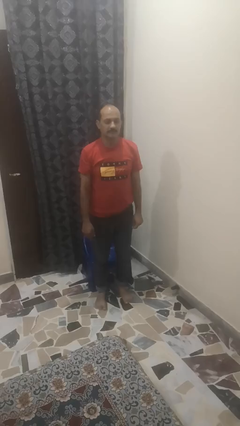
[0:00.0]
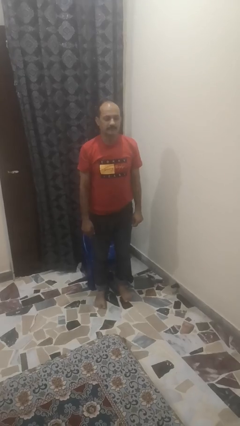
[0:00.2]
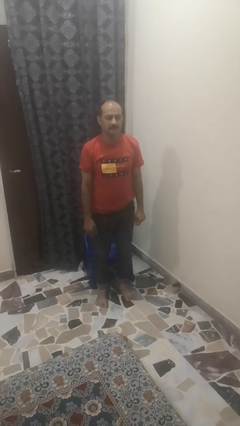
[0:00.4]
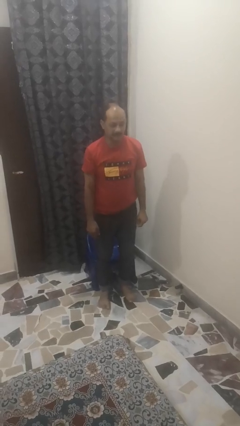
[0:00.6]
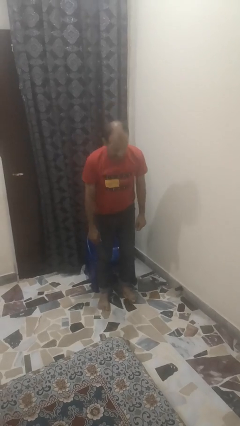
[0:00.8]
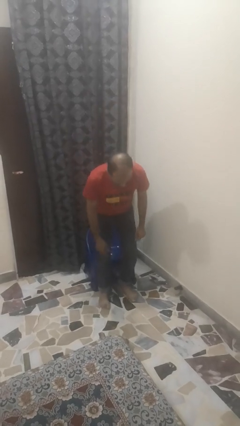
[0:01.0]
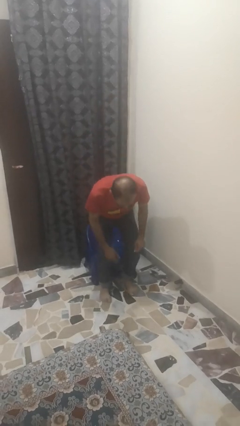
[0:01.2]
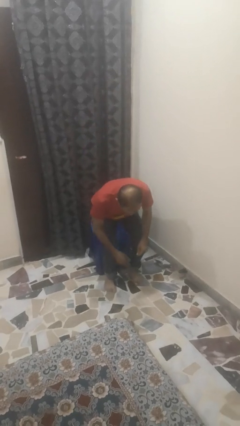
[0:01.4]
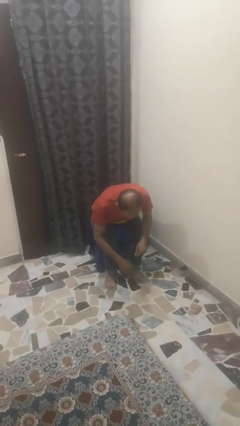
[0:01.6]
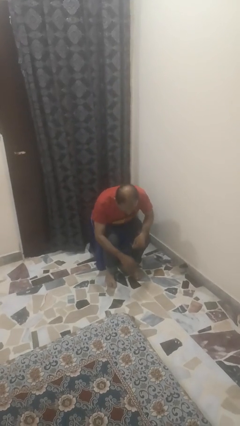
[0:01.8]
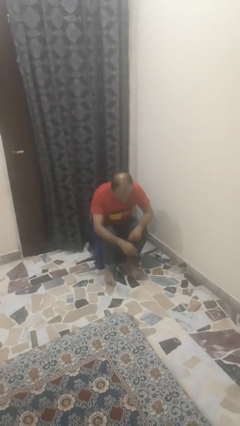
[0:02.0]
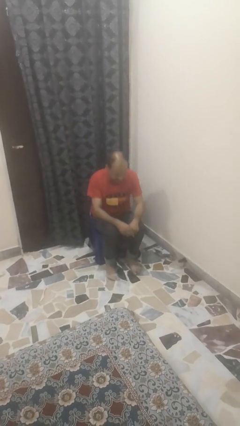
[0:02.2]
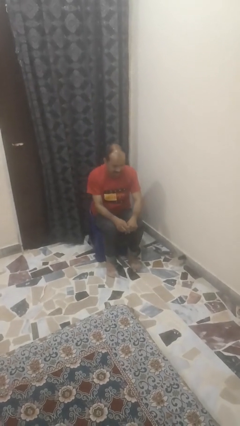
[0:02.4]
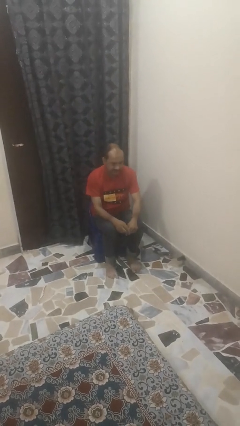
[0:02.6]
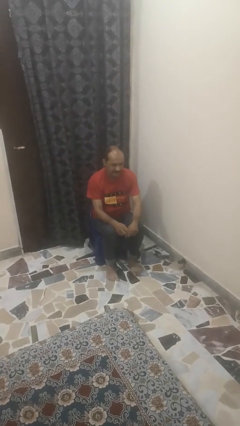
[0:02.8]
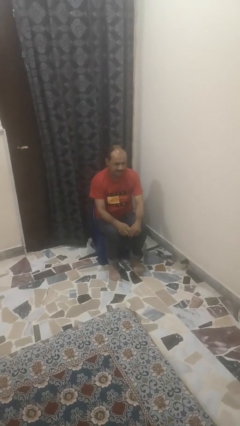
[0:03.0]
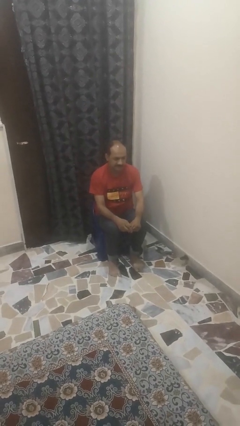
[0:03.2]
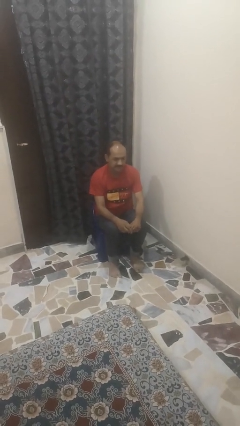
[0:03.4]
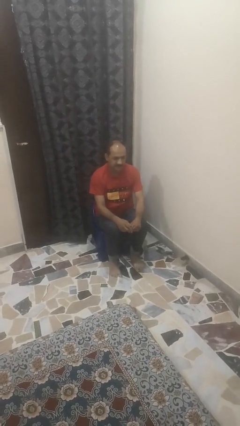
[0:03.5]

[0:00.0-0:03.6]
person sits down

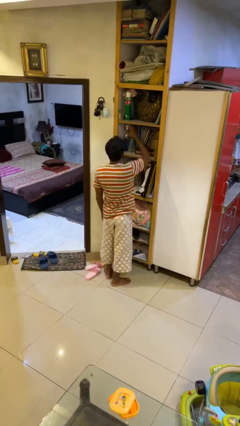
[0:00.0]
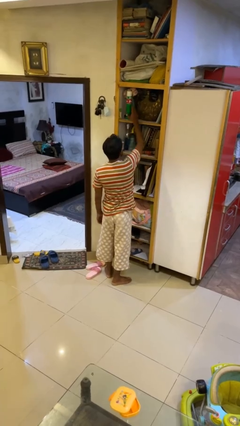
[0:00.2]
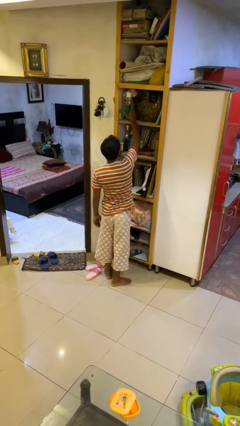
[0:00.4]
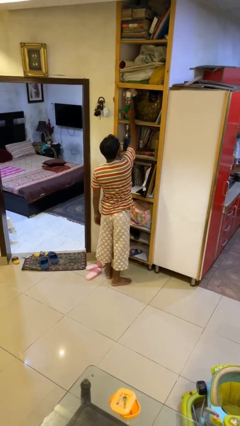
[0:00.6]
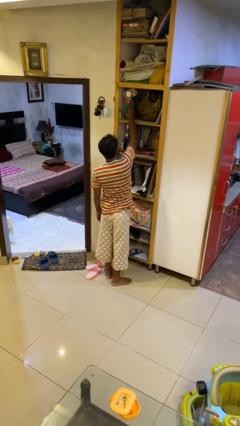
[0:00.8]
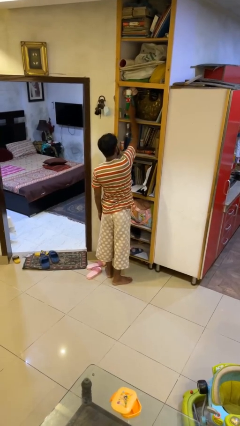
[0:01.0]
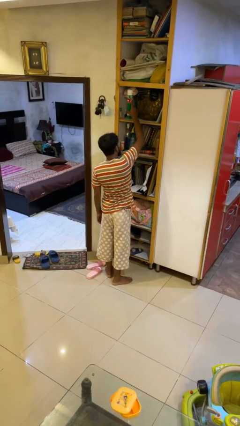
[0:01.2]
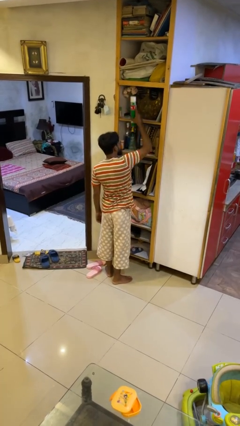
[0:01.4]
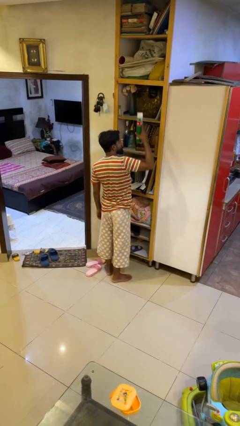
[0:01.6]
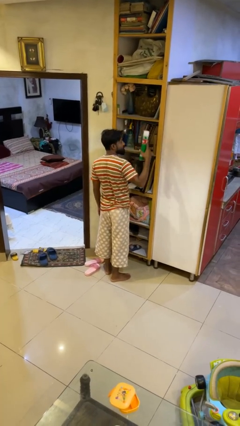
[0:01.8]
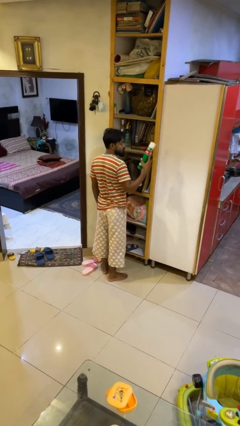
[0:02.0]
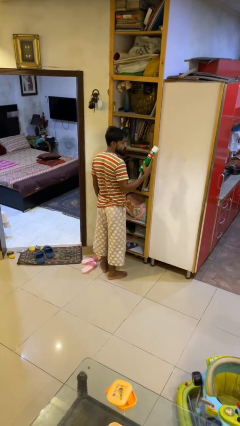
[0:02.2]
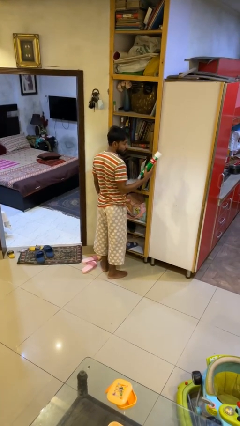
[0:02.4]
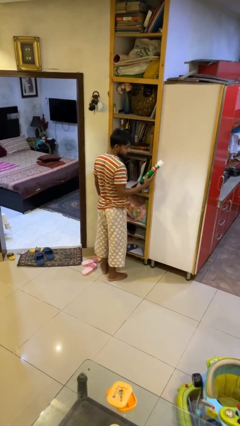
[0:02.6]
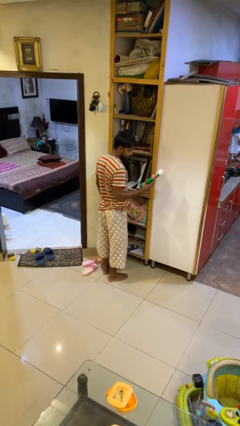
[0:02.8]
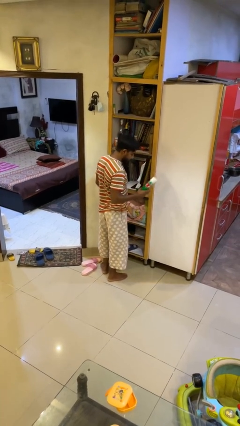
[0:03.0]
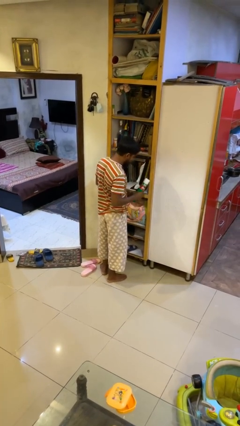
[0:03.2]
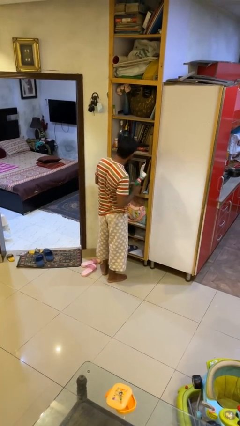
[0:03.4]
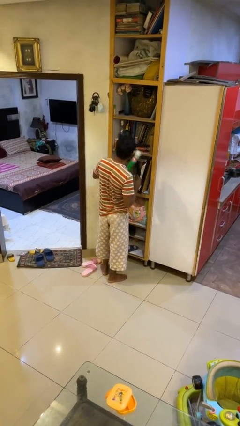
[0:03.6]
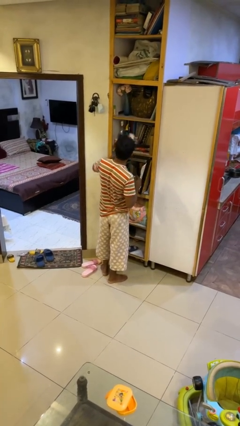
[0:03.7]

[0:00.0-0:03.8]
person picks up object from shelf

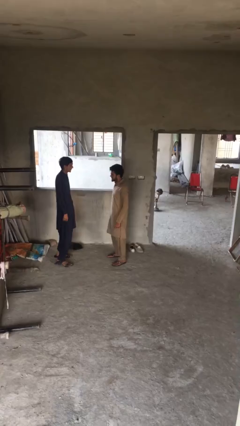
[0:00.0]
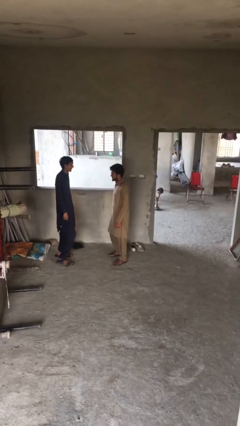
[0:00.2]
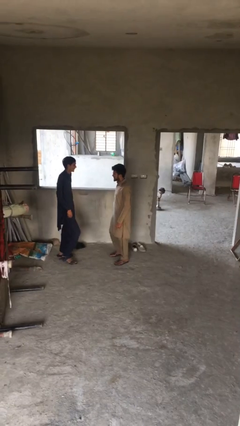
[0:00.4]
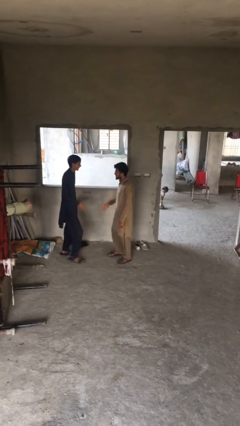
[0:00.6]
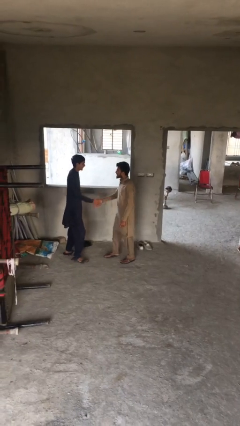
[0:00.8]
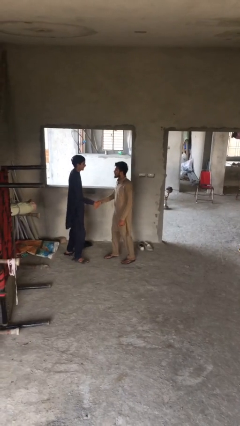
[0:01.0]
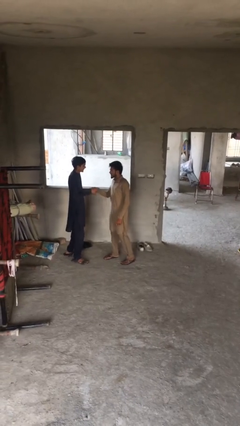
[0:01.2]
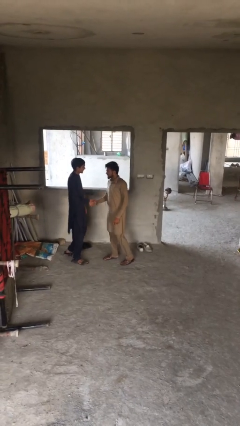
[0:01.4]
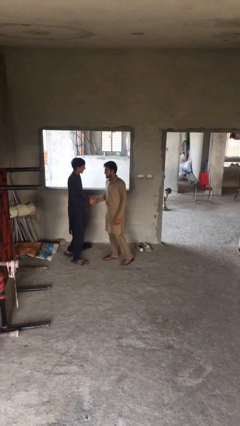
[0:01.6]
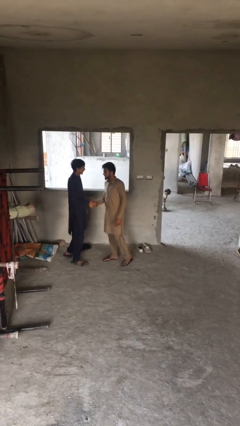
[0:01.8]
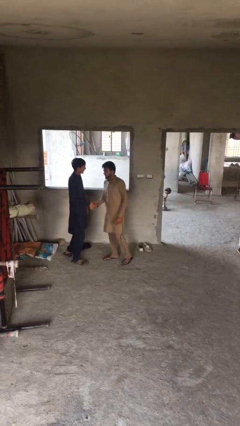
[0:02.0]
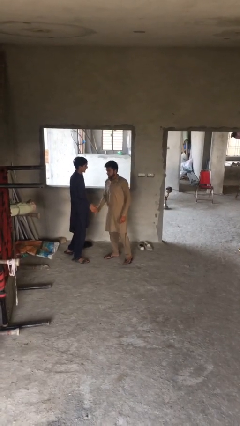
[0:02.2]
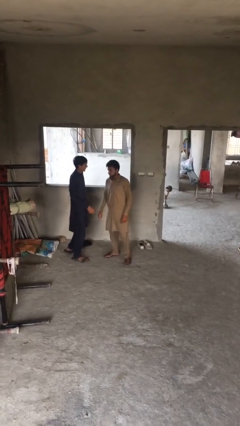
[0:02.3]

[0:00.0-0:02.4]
person shakes hand

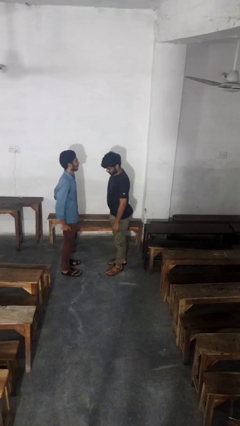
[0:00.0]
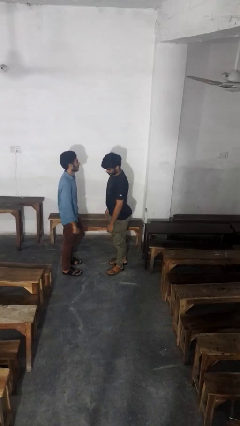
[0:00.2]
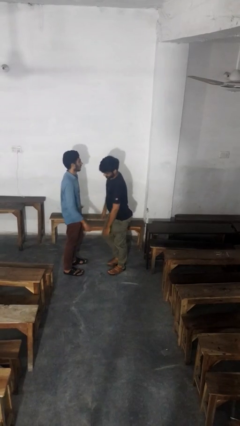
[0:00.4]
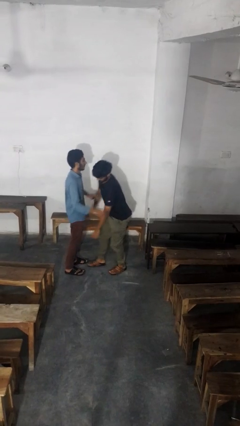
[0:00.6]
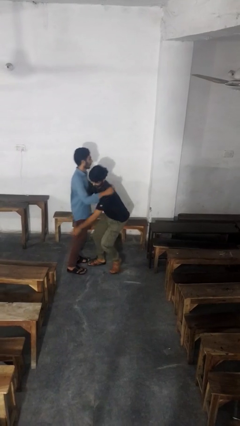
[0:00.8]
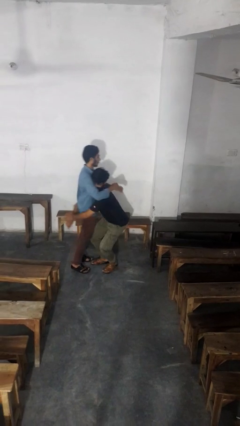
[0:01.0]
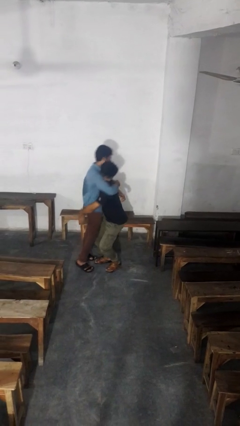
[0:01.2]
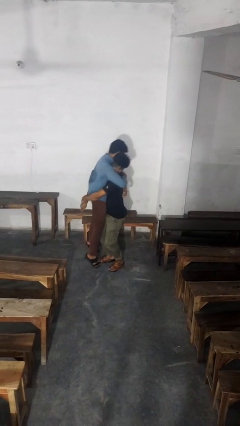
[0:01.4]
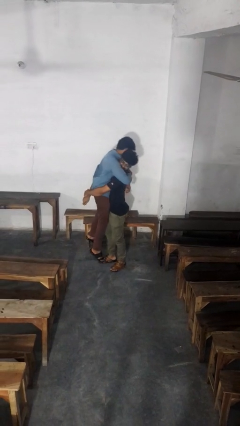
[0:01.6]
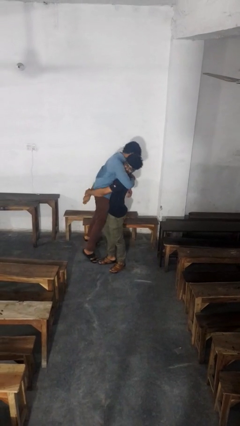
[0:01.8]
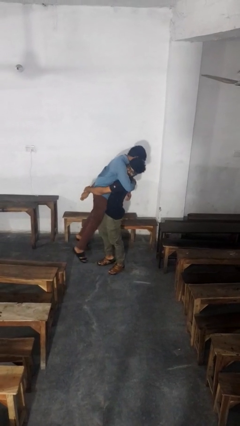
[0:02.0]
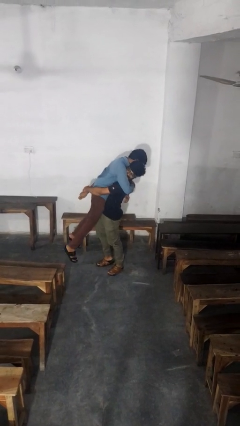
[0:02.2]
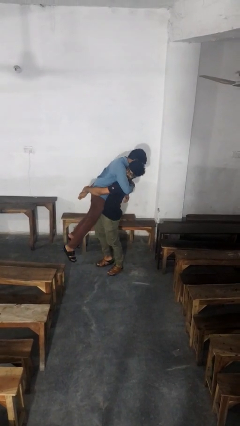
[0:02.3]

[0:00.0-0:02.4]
person picks up person

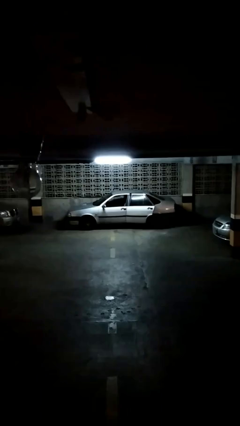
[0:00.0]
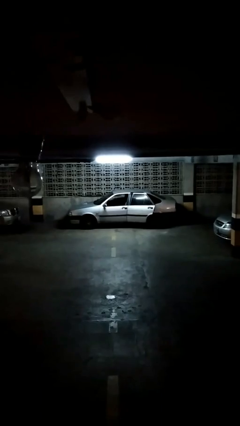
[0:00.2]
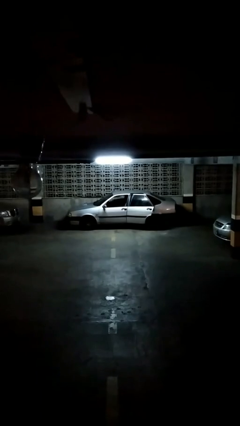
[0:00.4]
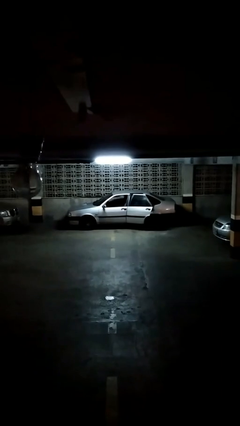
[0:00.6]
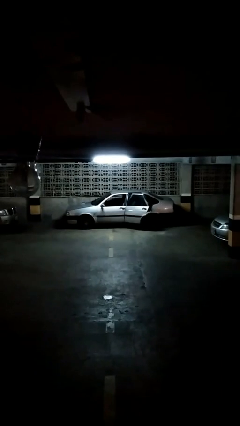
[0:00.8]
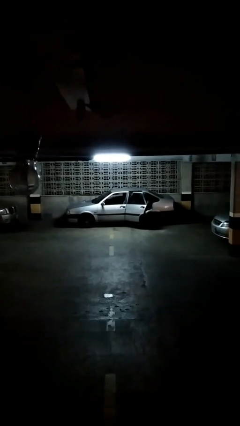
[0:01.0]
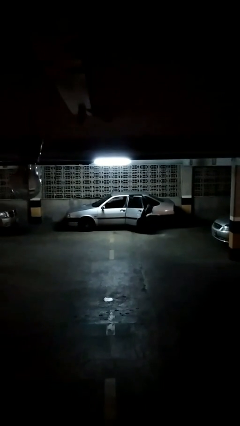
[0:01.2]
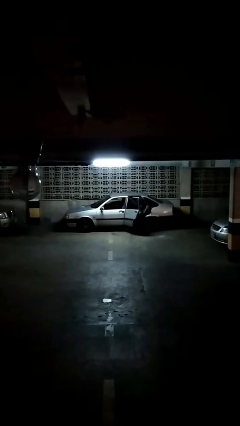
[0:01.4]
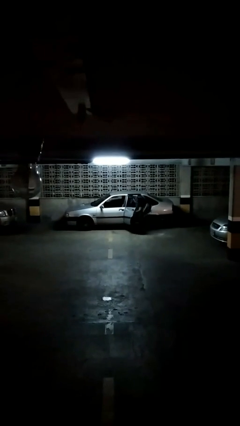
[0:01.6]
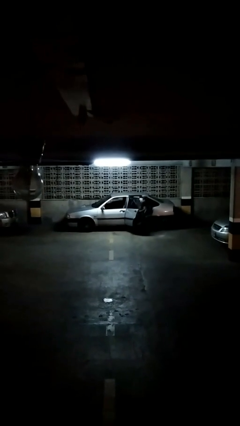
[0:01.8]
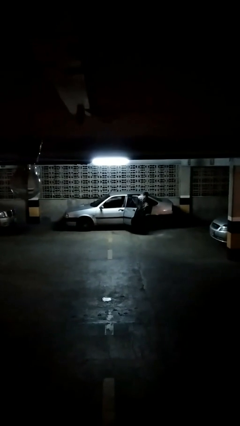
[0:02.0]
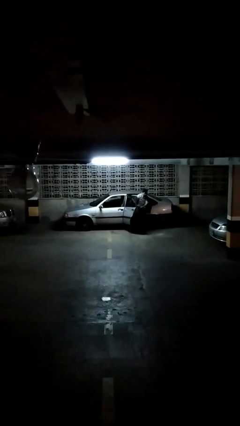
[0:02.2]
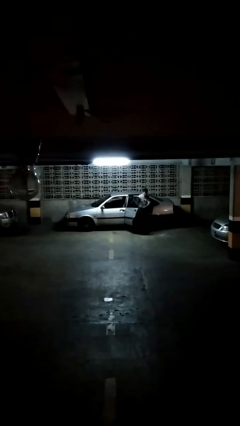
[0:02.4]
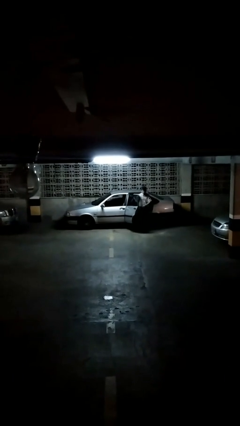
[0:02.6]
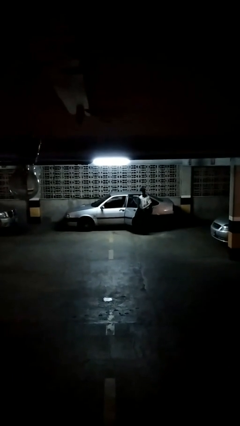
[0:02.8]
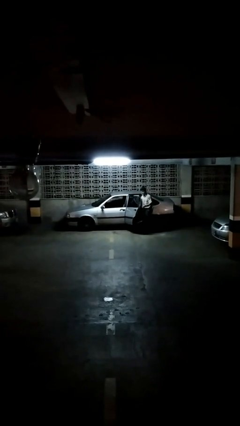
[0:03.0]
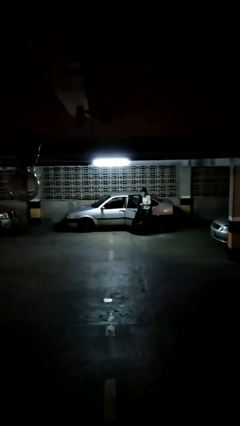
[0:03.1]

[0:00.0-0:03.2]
car drops off person

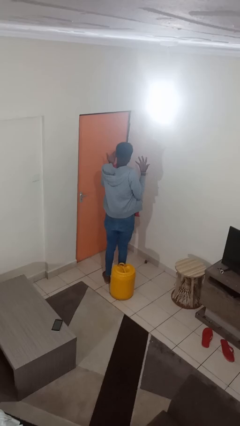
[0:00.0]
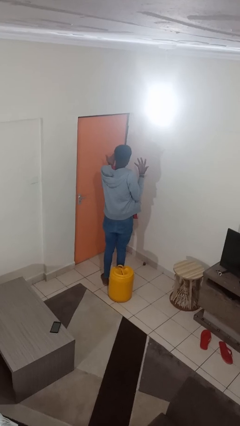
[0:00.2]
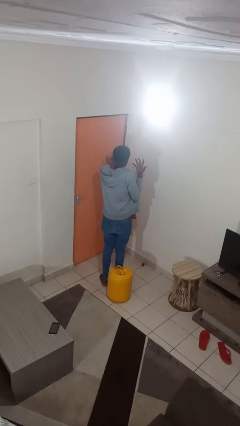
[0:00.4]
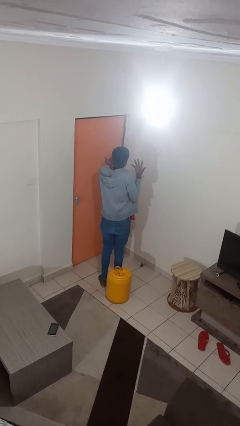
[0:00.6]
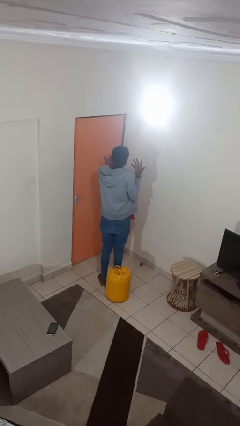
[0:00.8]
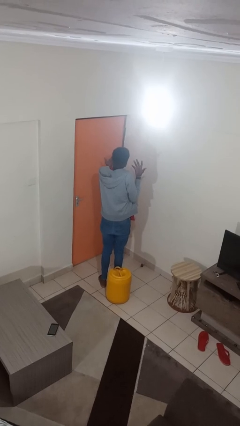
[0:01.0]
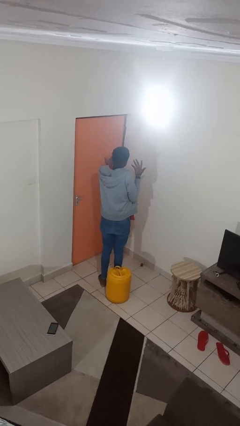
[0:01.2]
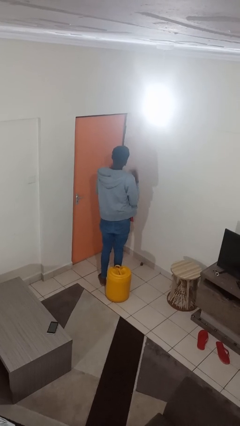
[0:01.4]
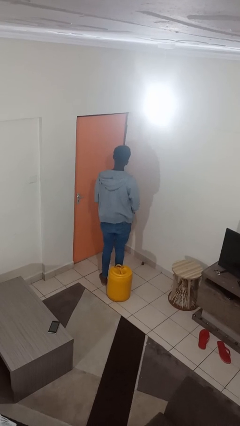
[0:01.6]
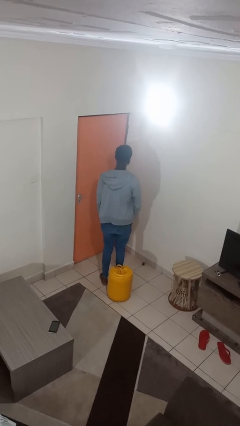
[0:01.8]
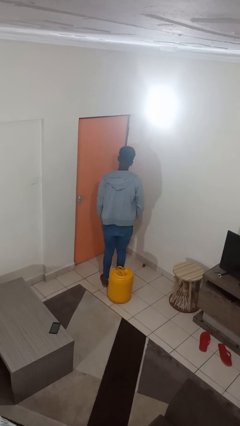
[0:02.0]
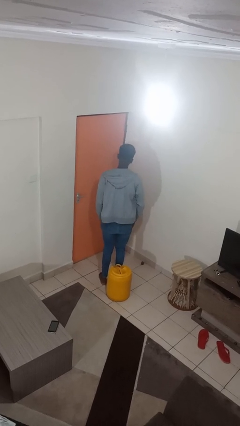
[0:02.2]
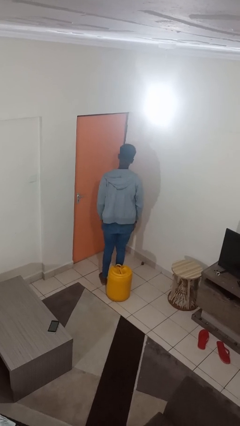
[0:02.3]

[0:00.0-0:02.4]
person shrugs
